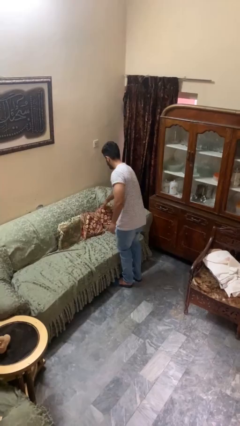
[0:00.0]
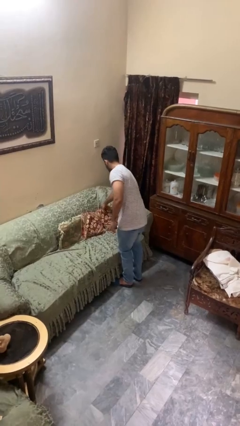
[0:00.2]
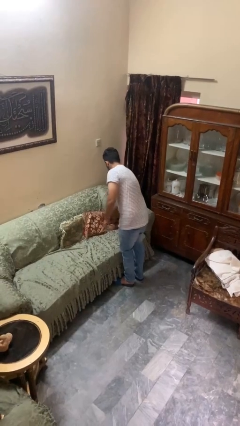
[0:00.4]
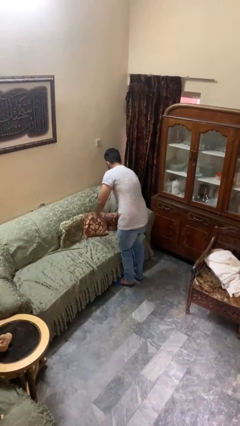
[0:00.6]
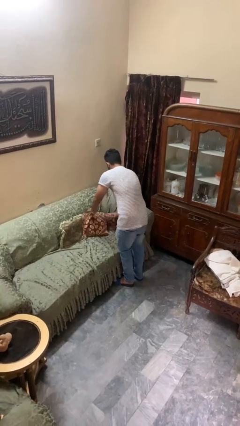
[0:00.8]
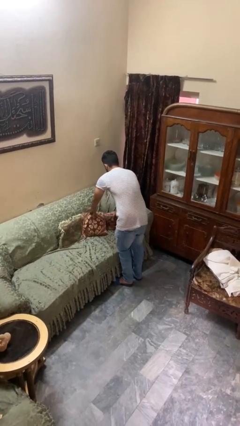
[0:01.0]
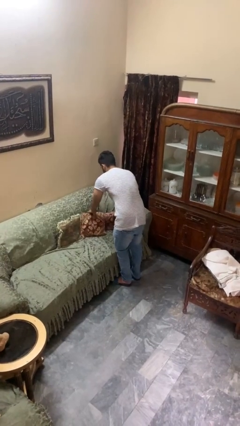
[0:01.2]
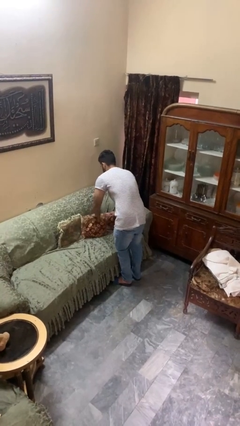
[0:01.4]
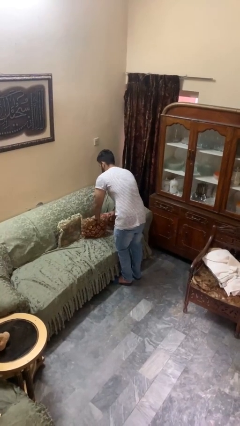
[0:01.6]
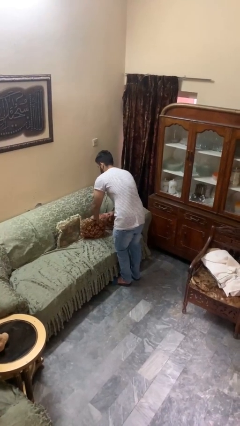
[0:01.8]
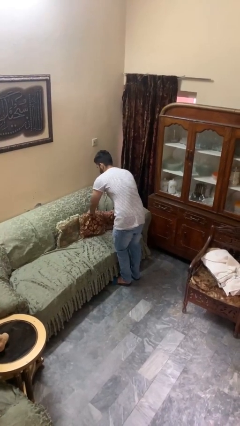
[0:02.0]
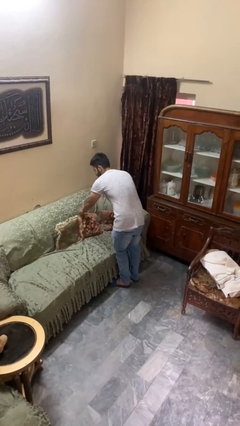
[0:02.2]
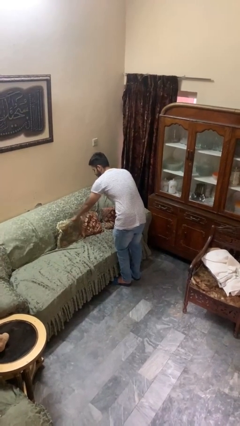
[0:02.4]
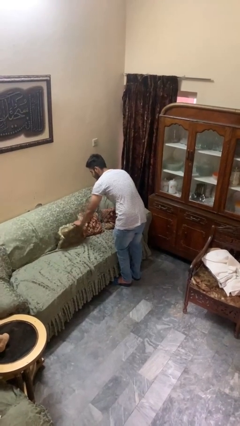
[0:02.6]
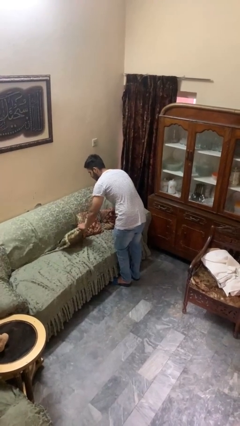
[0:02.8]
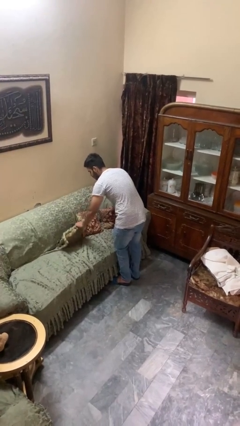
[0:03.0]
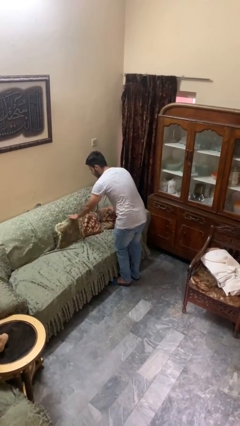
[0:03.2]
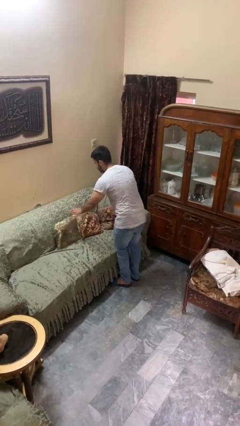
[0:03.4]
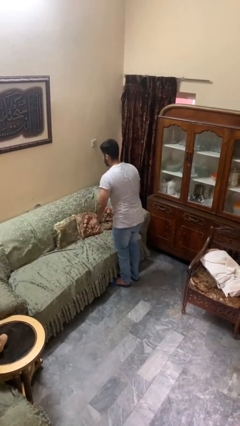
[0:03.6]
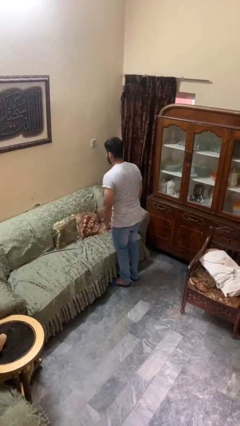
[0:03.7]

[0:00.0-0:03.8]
person searches in couch

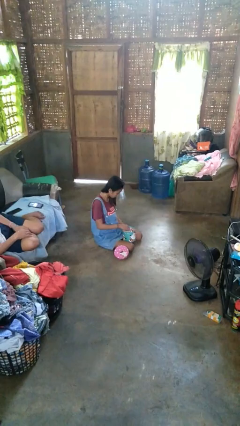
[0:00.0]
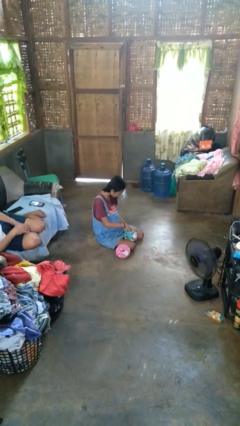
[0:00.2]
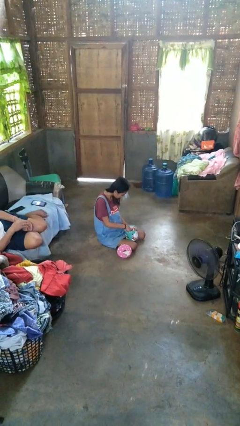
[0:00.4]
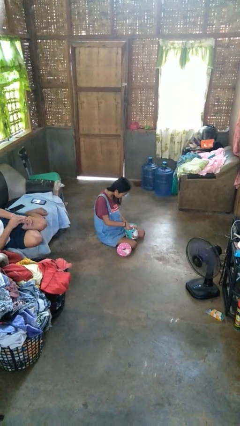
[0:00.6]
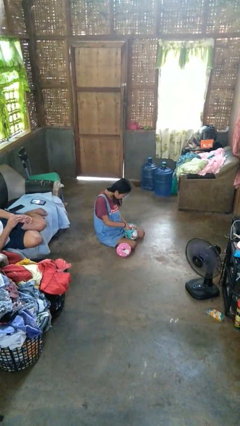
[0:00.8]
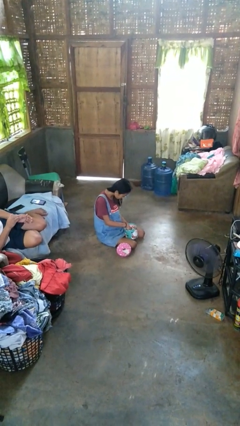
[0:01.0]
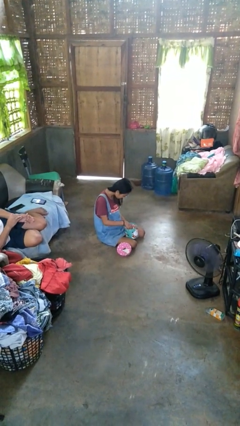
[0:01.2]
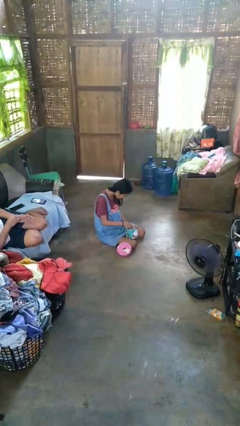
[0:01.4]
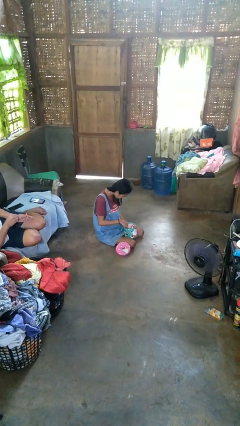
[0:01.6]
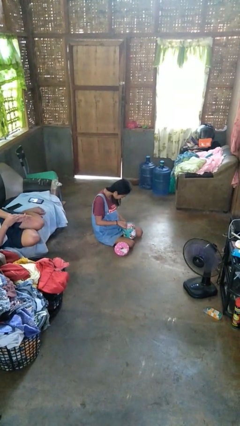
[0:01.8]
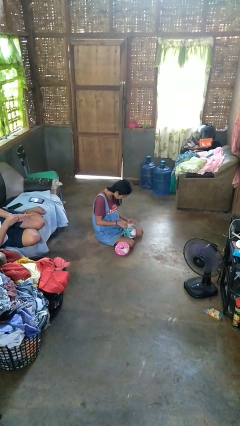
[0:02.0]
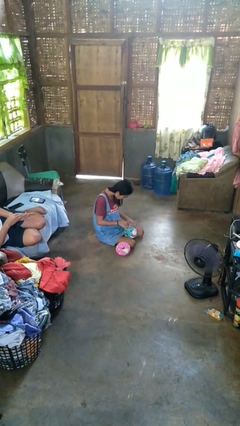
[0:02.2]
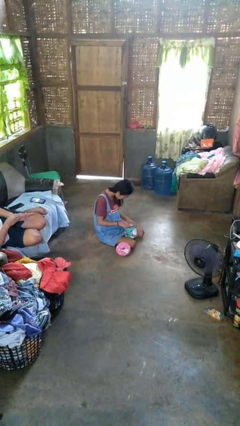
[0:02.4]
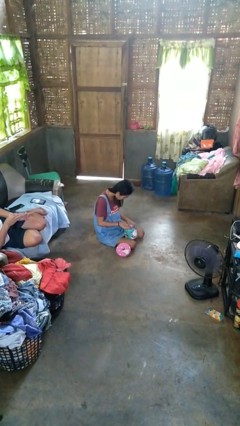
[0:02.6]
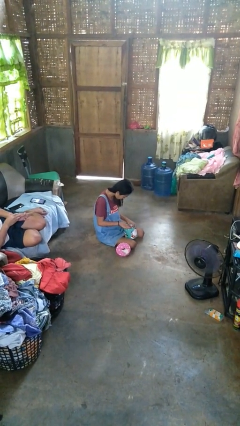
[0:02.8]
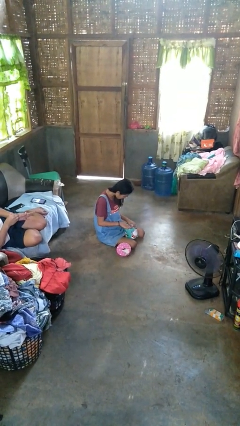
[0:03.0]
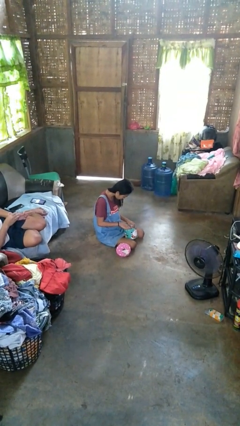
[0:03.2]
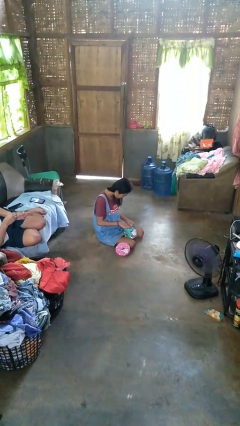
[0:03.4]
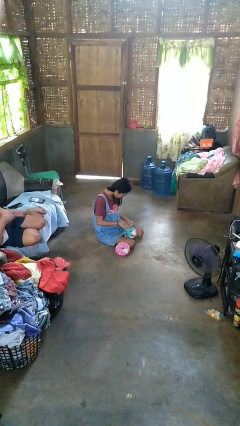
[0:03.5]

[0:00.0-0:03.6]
person searches jewelry box

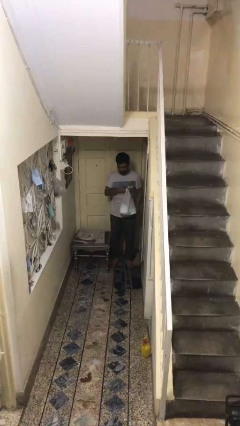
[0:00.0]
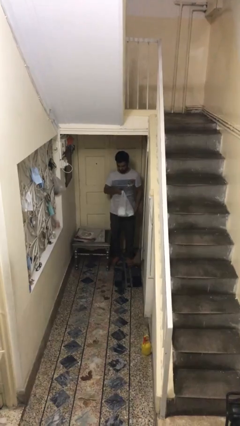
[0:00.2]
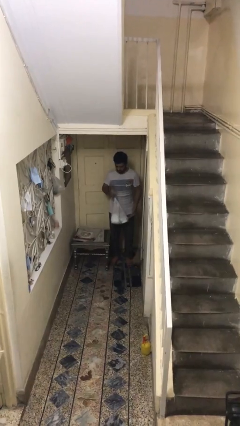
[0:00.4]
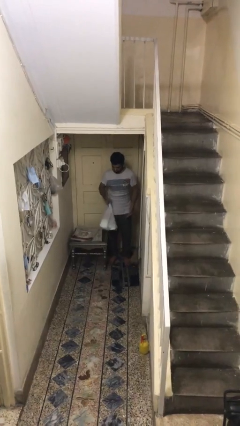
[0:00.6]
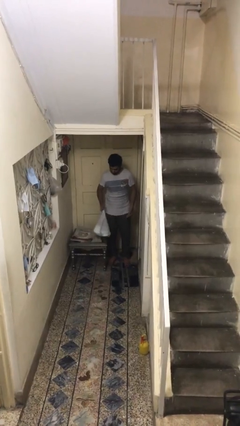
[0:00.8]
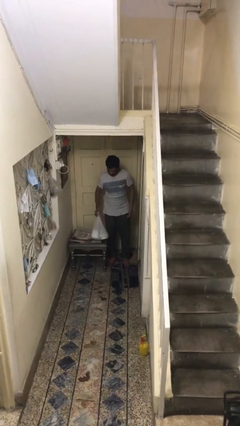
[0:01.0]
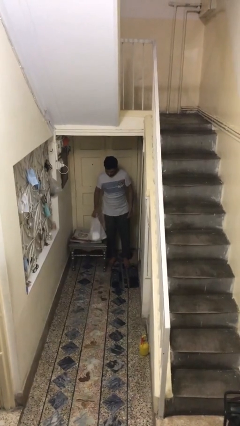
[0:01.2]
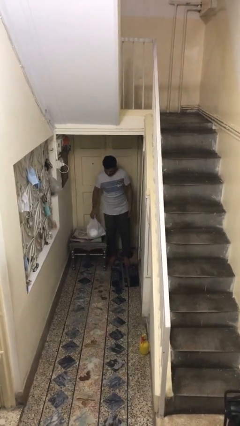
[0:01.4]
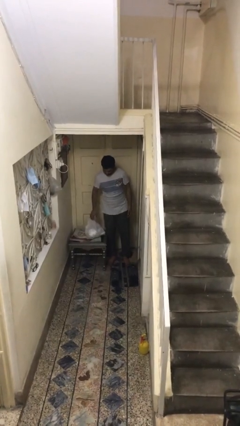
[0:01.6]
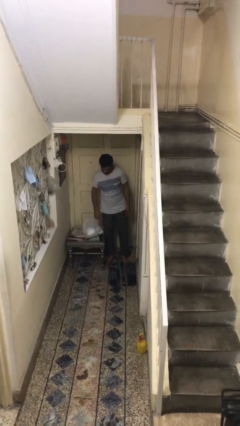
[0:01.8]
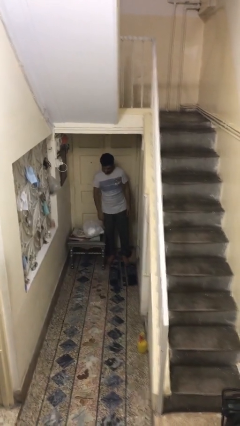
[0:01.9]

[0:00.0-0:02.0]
person puts down object on table

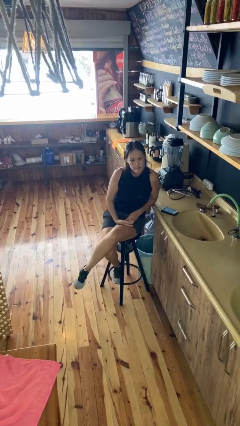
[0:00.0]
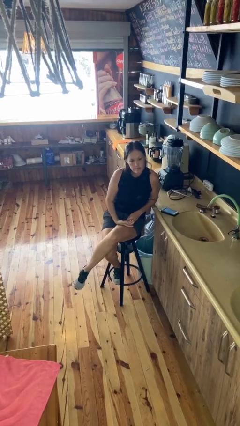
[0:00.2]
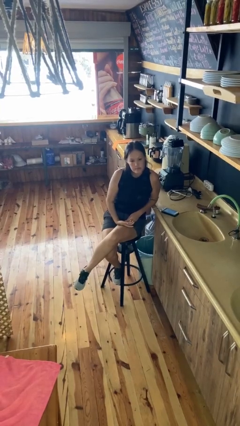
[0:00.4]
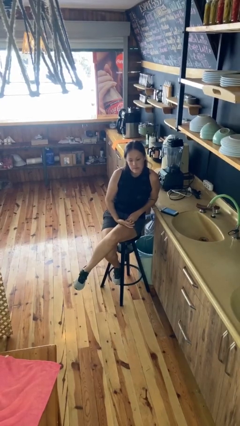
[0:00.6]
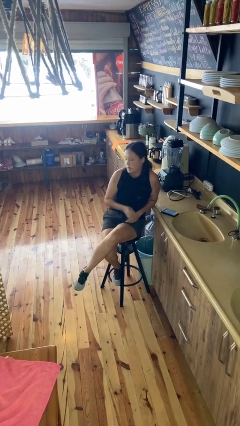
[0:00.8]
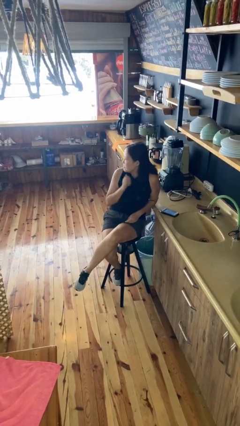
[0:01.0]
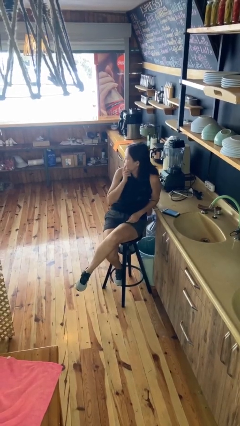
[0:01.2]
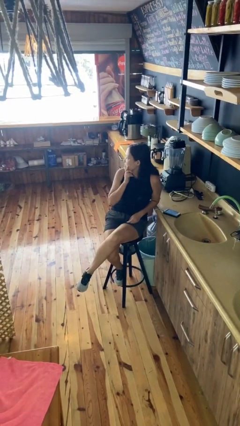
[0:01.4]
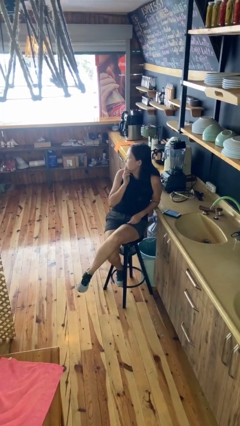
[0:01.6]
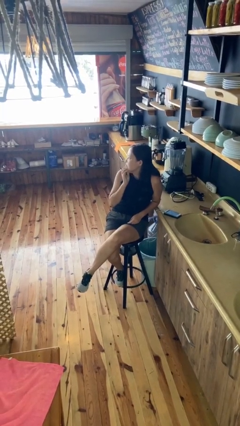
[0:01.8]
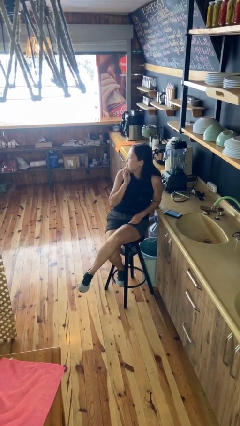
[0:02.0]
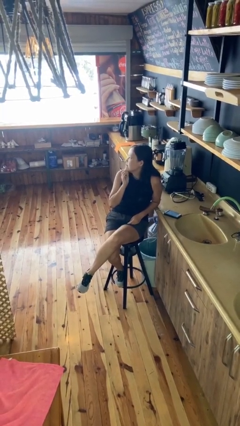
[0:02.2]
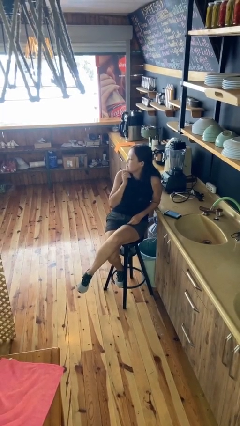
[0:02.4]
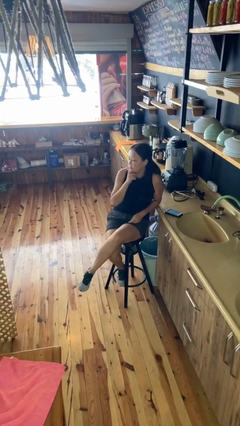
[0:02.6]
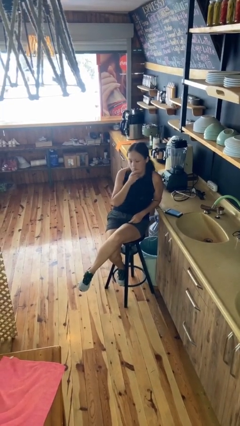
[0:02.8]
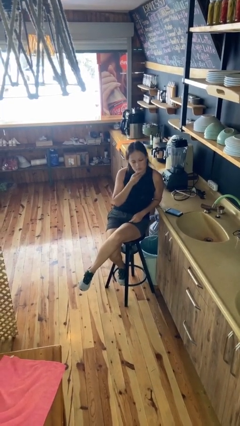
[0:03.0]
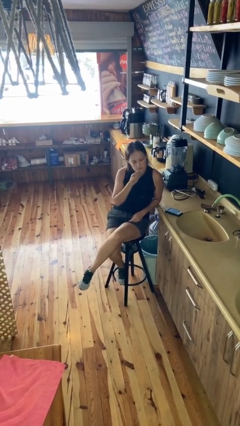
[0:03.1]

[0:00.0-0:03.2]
person strokes chin

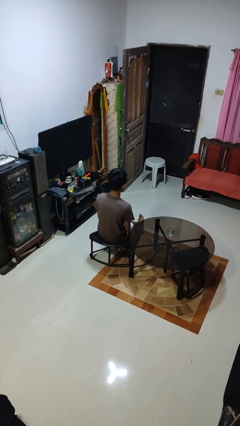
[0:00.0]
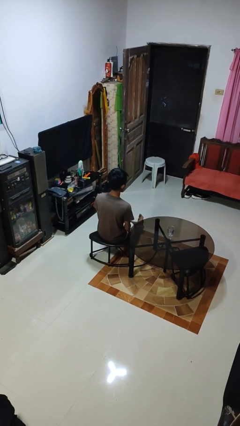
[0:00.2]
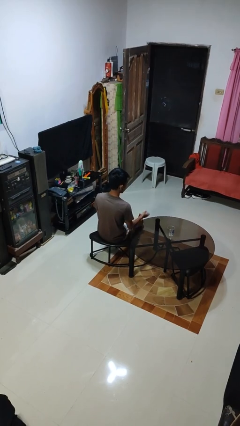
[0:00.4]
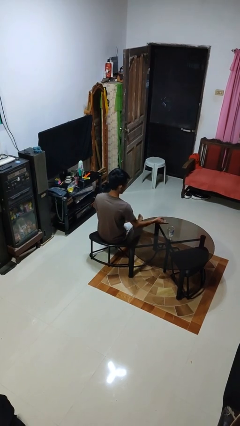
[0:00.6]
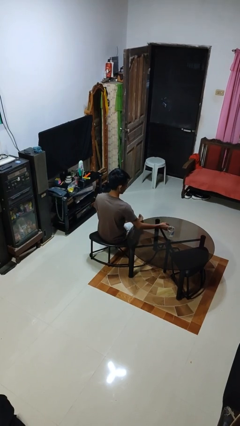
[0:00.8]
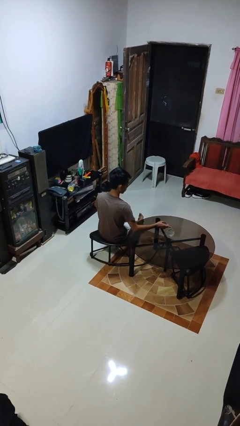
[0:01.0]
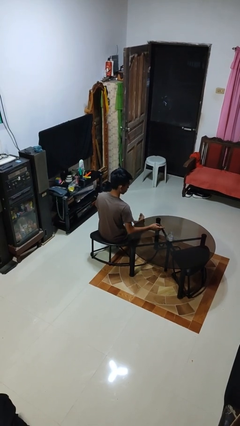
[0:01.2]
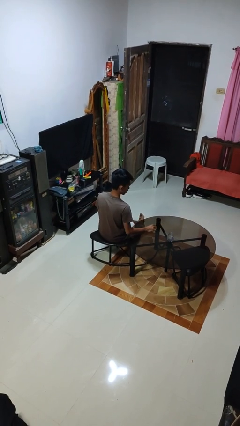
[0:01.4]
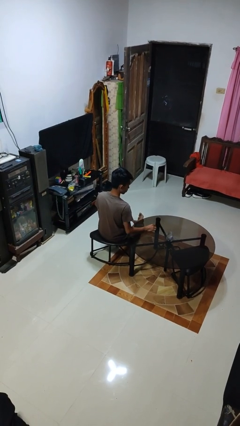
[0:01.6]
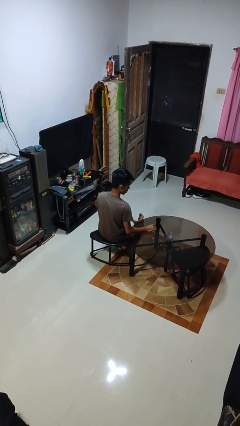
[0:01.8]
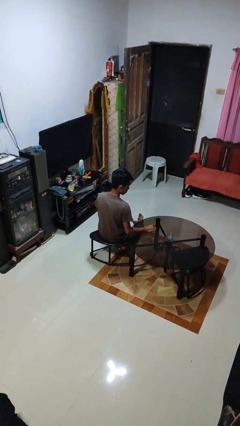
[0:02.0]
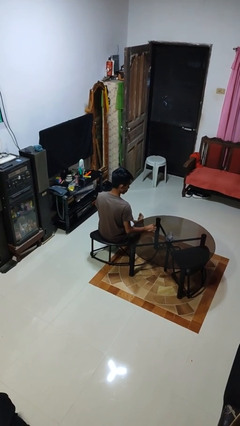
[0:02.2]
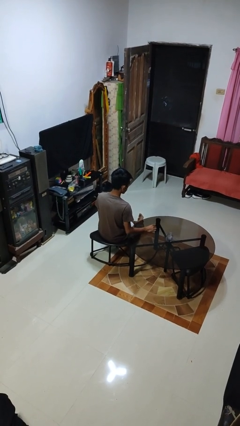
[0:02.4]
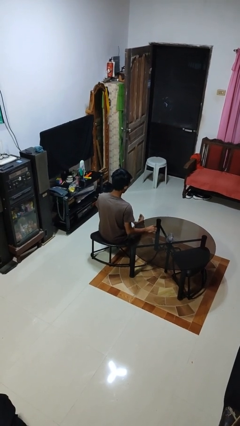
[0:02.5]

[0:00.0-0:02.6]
person spills on table

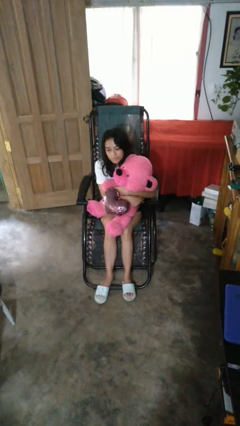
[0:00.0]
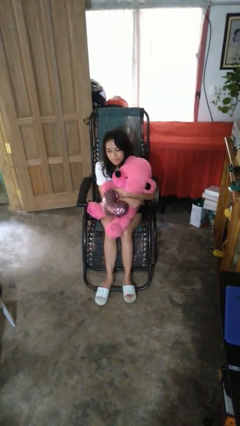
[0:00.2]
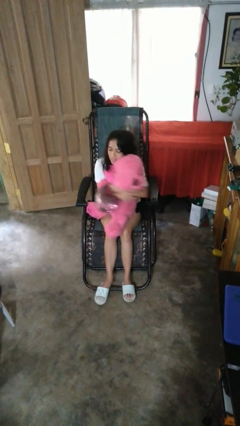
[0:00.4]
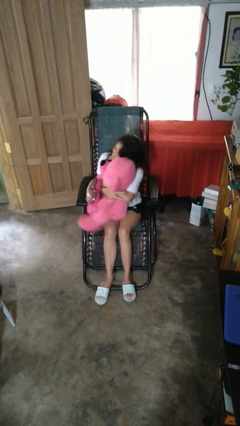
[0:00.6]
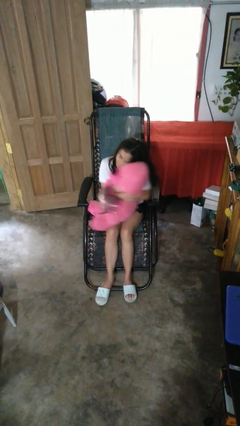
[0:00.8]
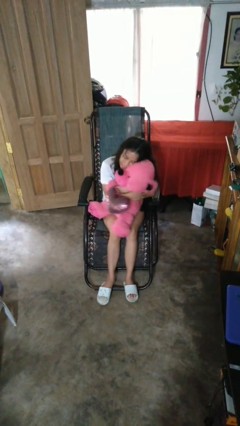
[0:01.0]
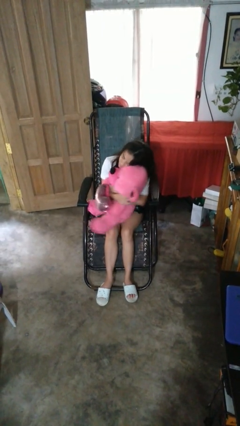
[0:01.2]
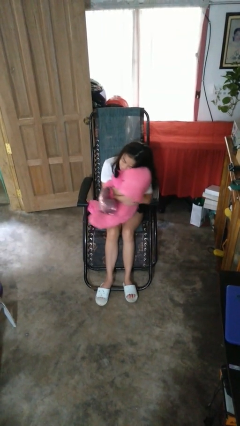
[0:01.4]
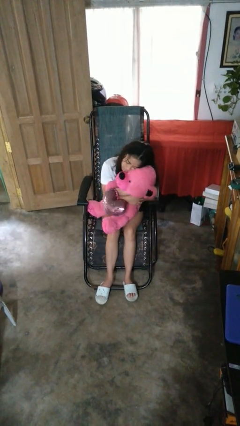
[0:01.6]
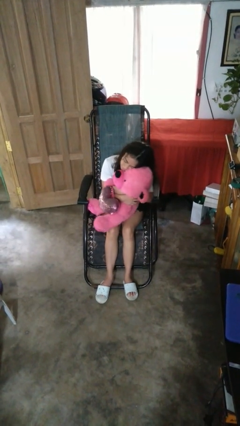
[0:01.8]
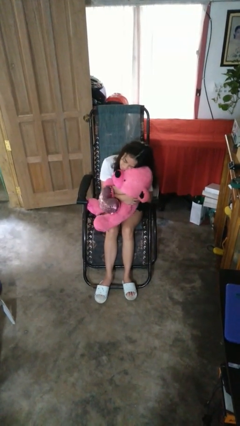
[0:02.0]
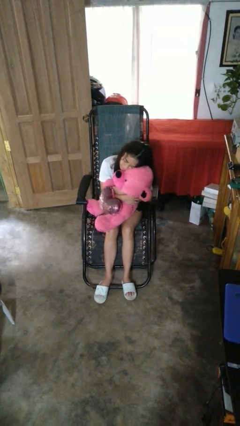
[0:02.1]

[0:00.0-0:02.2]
person hugs stuffed animal
